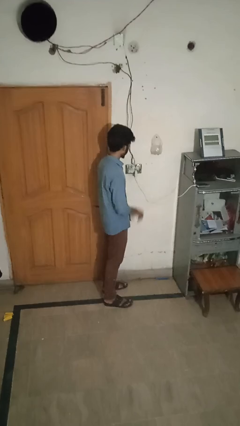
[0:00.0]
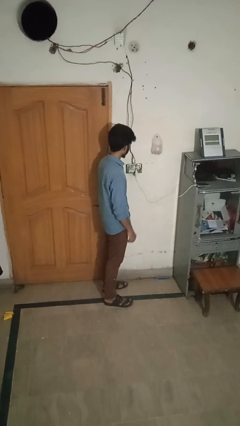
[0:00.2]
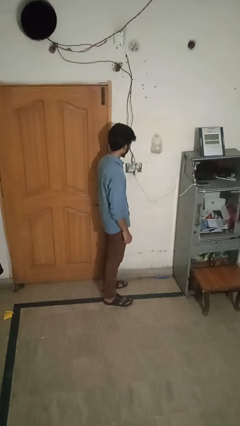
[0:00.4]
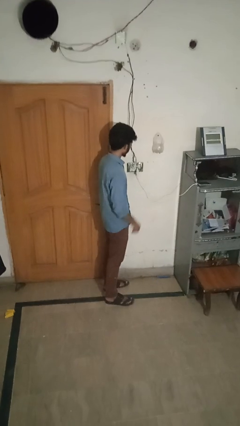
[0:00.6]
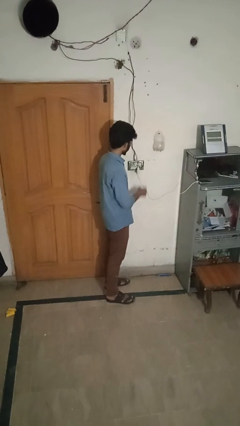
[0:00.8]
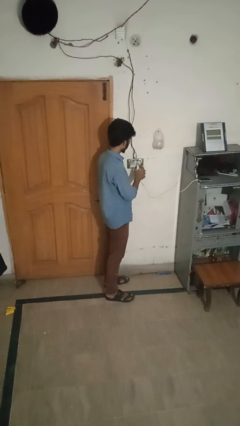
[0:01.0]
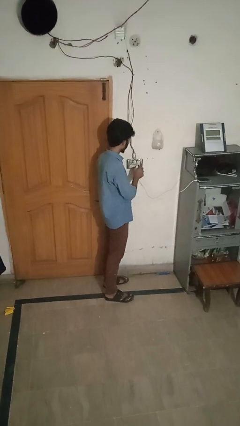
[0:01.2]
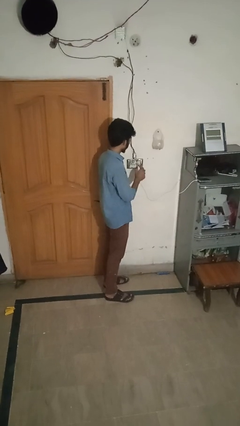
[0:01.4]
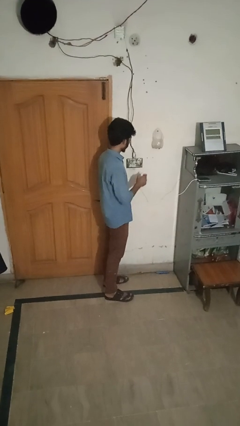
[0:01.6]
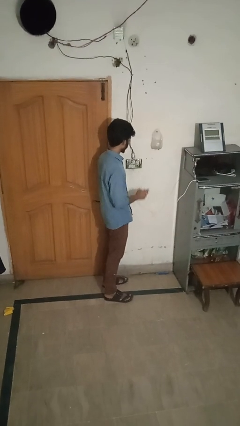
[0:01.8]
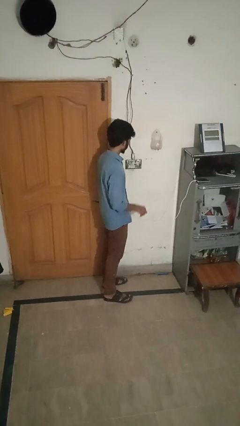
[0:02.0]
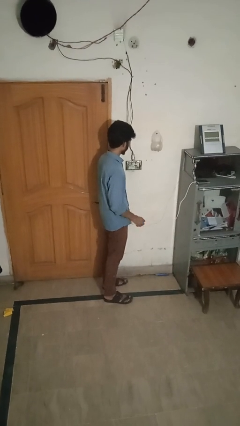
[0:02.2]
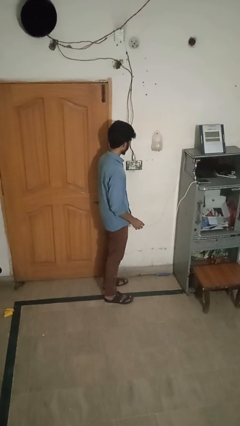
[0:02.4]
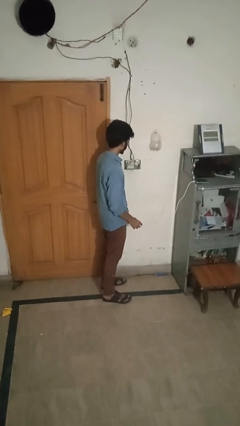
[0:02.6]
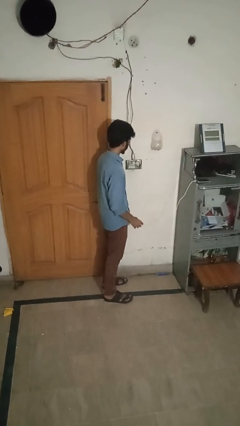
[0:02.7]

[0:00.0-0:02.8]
person unplugs from electrical socket

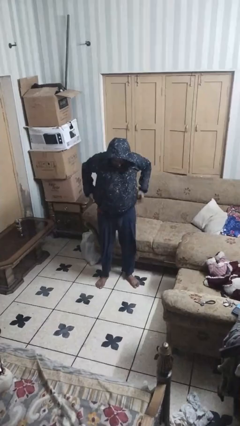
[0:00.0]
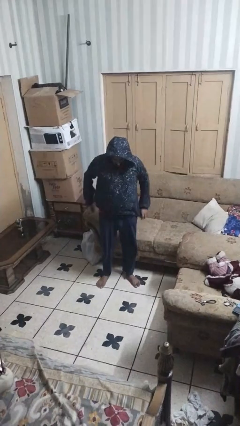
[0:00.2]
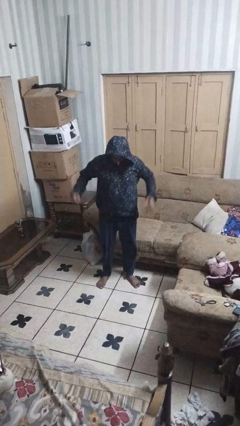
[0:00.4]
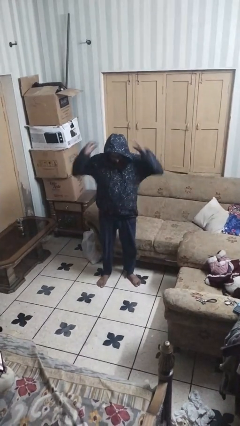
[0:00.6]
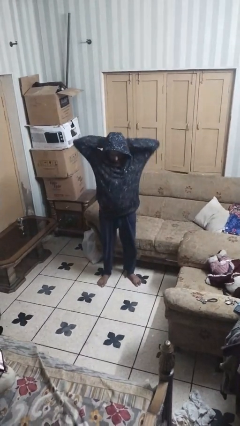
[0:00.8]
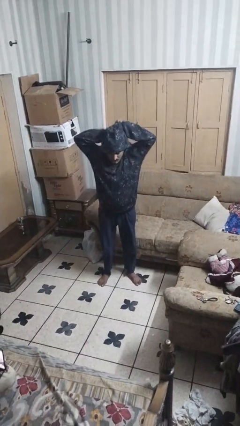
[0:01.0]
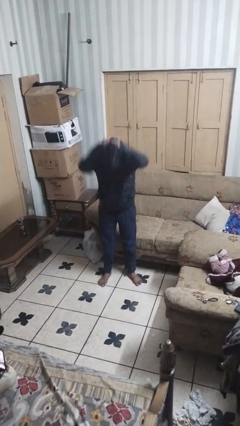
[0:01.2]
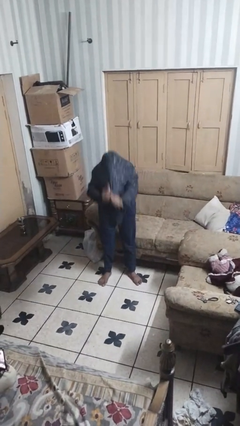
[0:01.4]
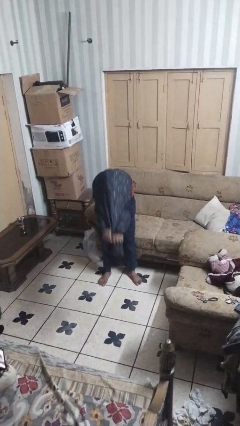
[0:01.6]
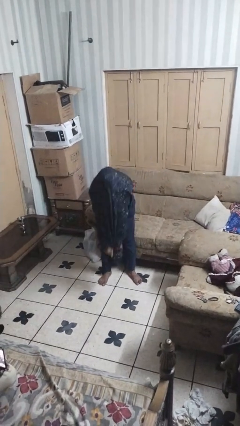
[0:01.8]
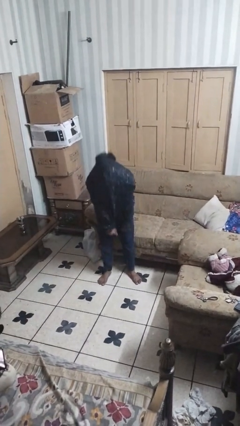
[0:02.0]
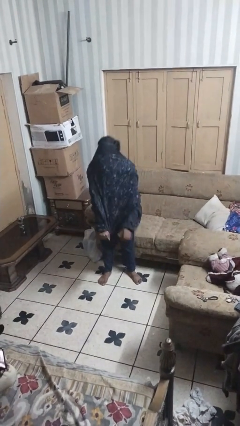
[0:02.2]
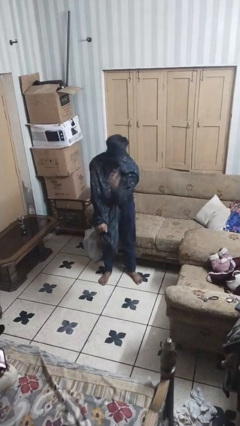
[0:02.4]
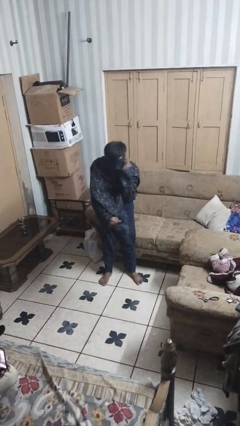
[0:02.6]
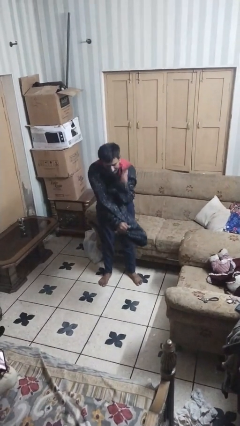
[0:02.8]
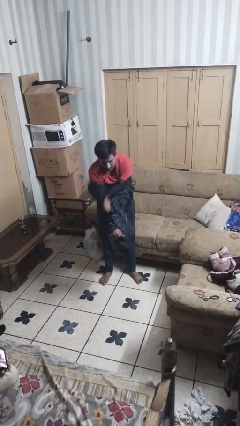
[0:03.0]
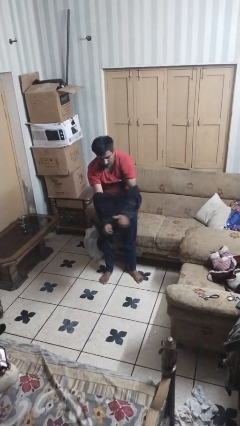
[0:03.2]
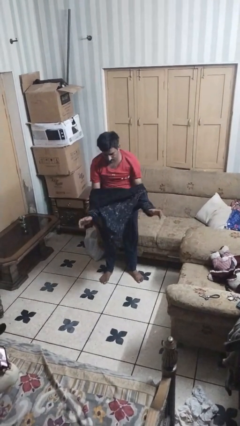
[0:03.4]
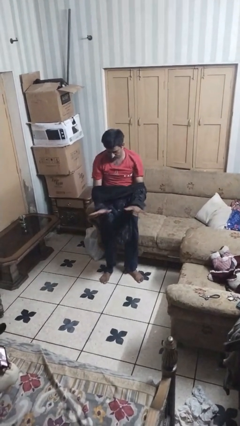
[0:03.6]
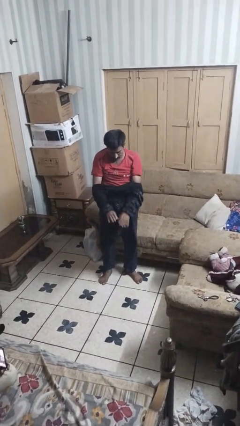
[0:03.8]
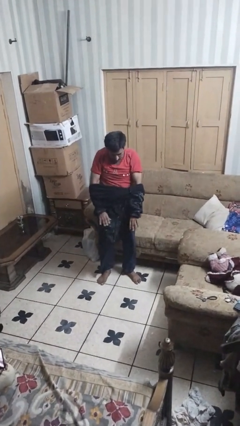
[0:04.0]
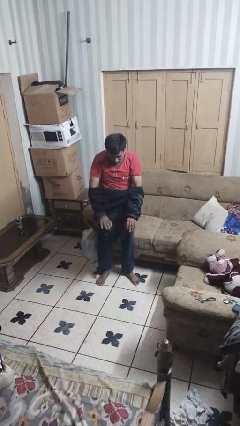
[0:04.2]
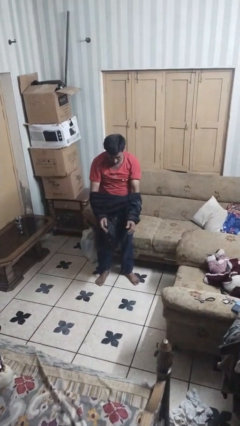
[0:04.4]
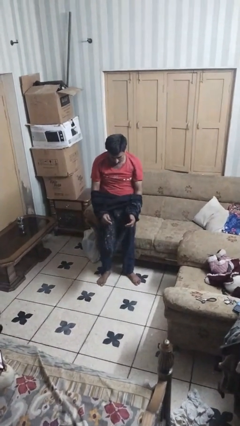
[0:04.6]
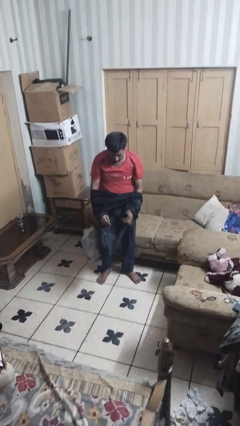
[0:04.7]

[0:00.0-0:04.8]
person takes off hoodie

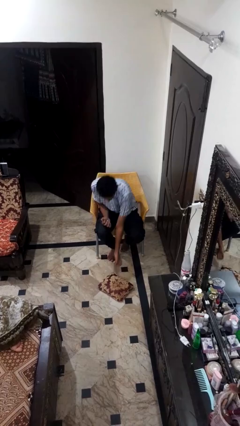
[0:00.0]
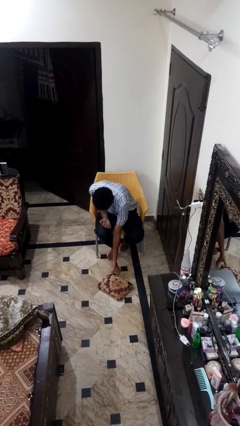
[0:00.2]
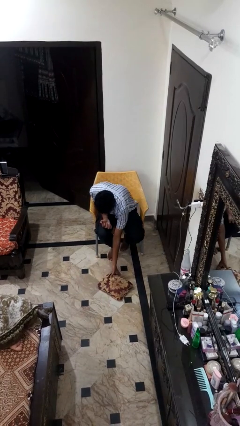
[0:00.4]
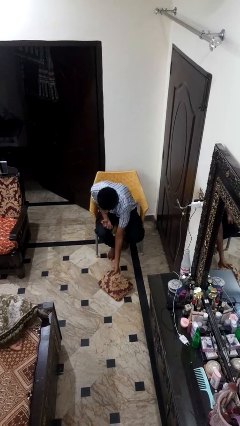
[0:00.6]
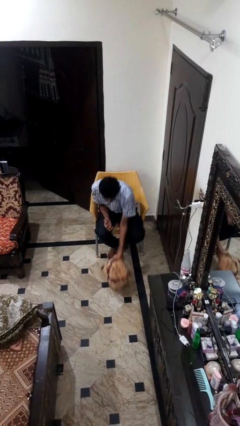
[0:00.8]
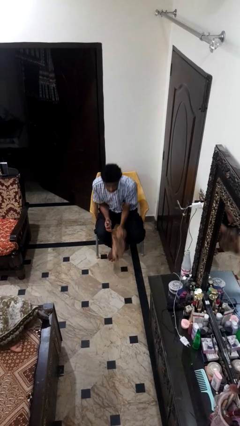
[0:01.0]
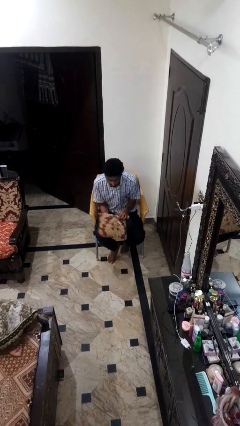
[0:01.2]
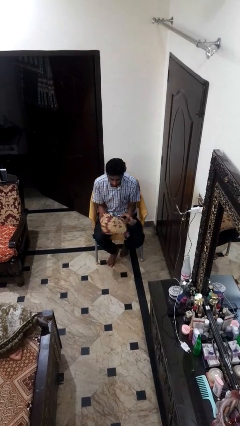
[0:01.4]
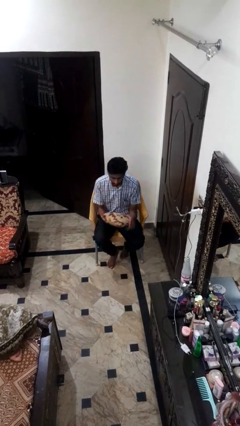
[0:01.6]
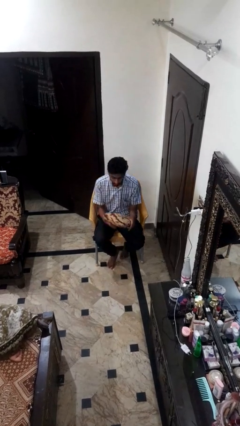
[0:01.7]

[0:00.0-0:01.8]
person picks up object from floor

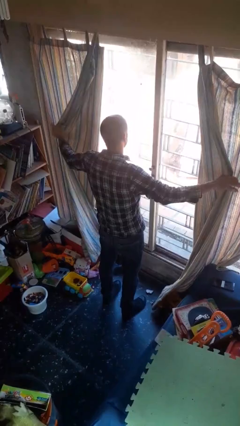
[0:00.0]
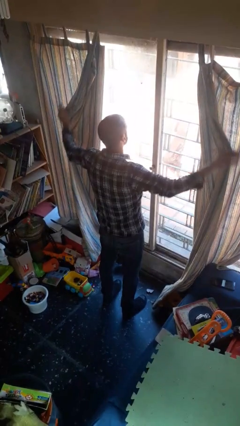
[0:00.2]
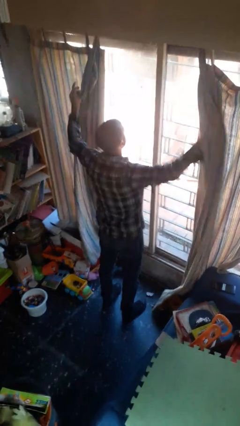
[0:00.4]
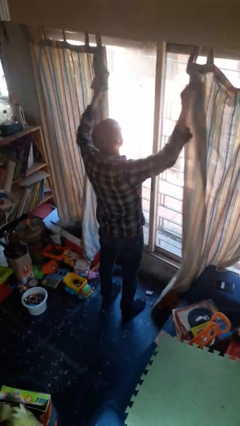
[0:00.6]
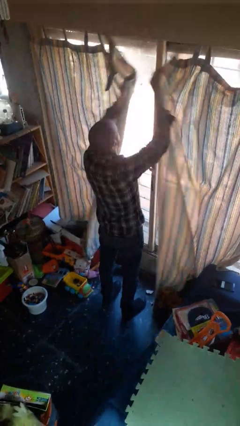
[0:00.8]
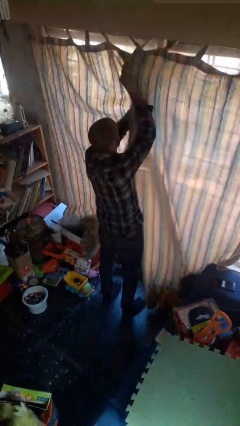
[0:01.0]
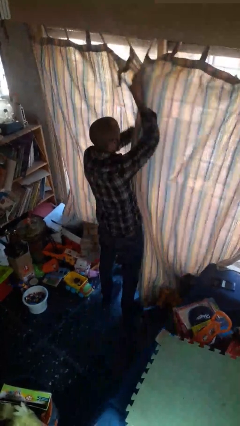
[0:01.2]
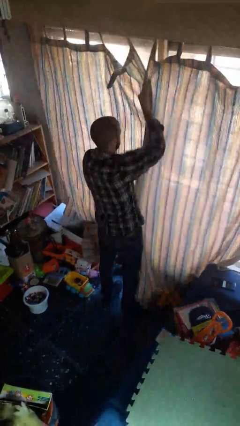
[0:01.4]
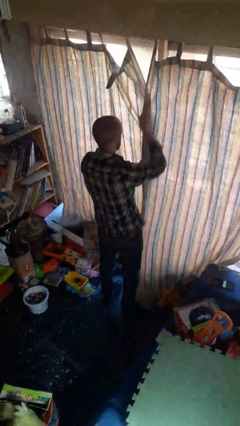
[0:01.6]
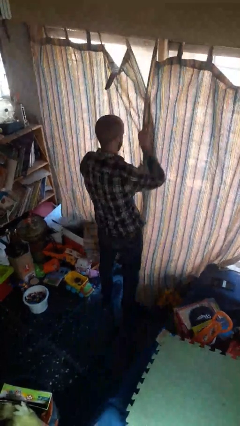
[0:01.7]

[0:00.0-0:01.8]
person closes curtains

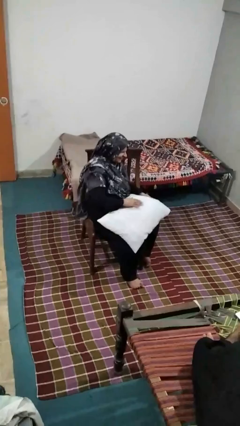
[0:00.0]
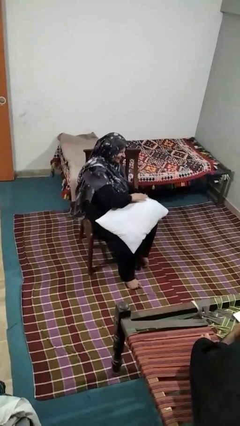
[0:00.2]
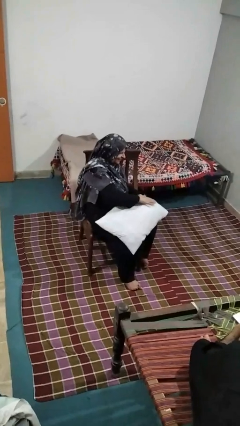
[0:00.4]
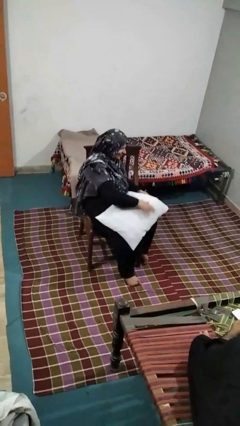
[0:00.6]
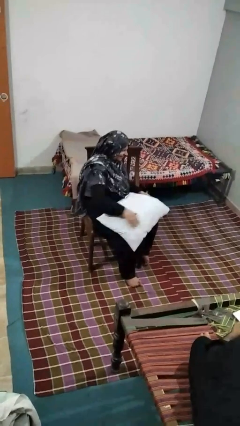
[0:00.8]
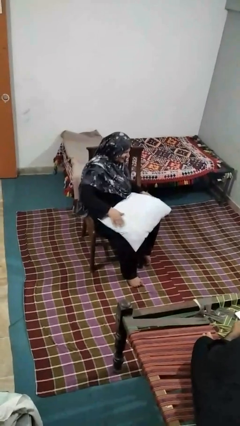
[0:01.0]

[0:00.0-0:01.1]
person waves hand over object

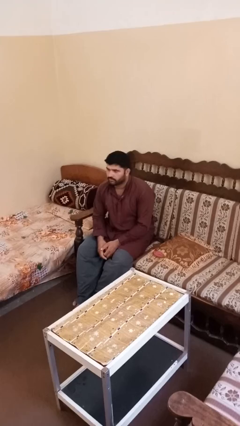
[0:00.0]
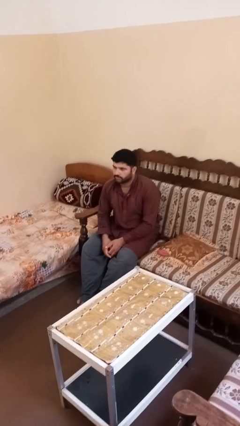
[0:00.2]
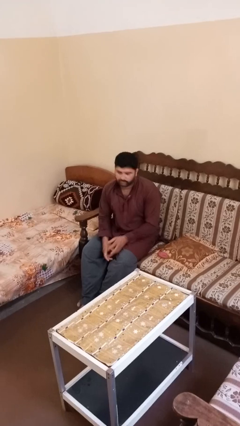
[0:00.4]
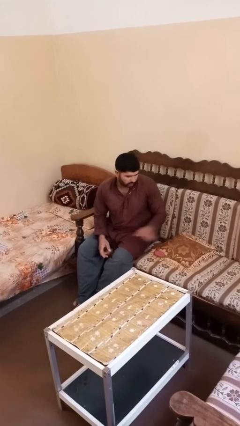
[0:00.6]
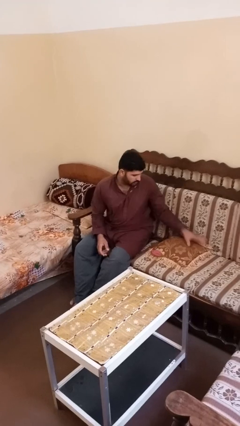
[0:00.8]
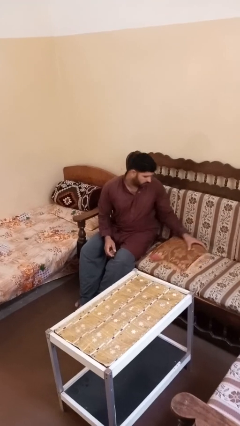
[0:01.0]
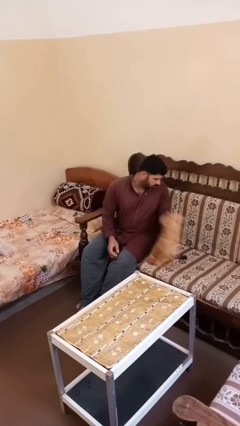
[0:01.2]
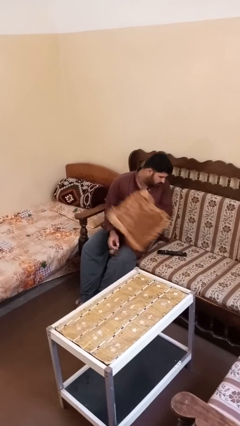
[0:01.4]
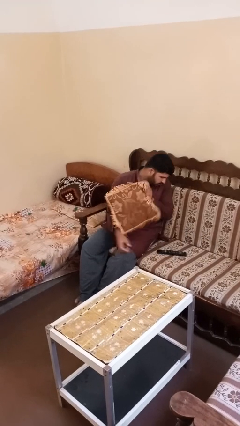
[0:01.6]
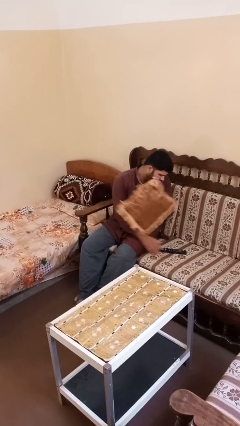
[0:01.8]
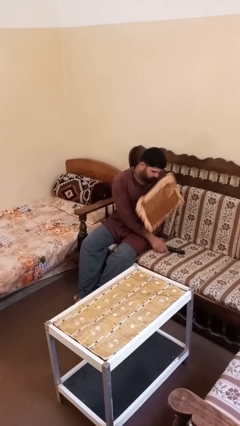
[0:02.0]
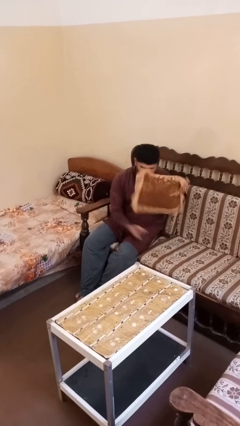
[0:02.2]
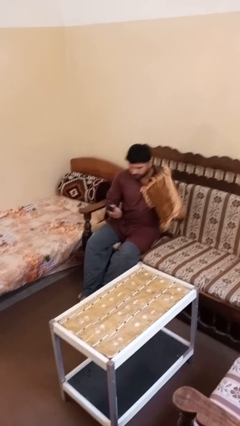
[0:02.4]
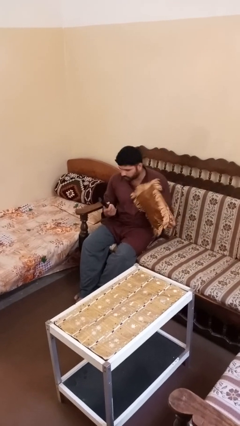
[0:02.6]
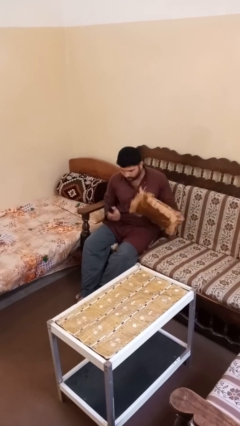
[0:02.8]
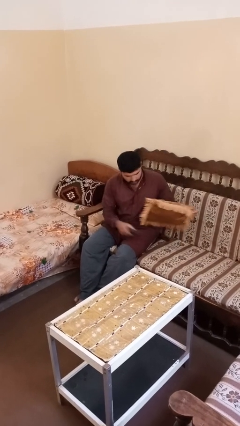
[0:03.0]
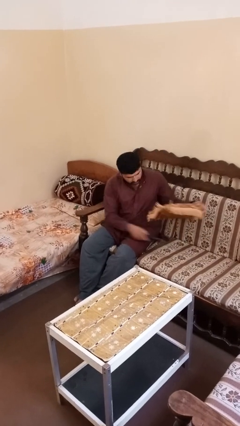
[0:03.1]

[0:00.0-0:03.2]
person searches in couch

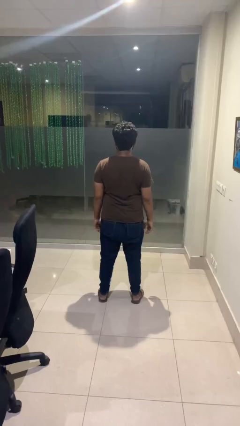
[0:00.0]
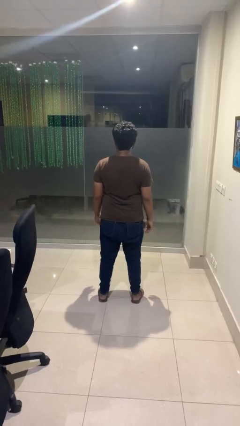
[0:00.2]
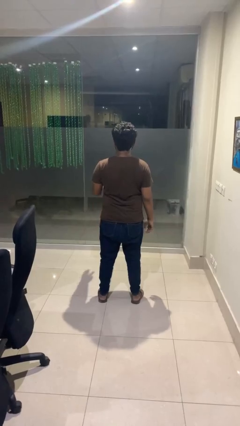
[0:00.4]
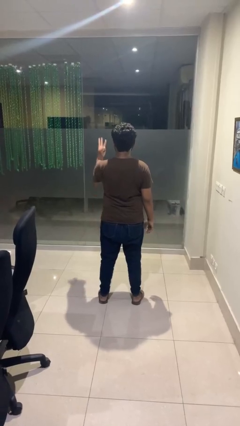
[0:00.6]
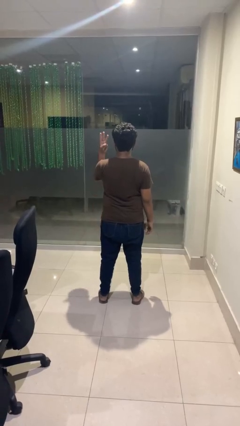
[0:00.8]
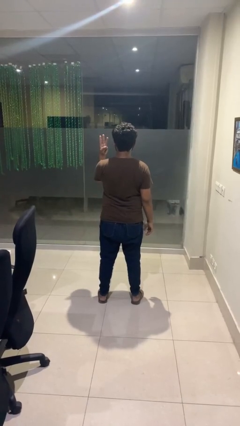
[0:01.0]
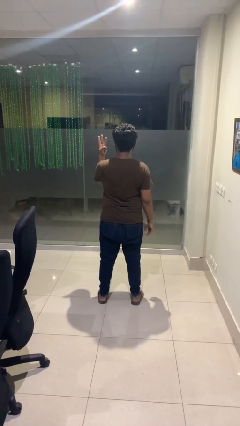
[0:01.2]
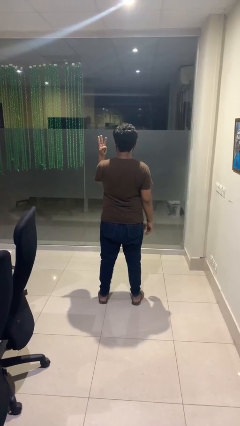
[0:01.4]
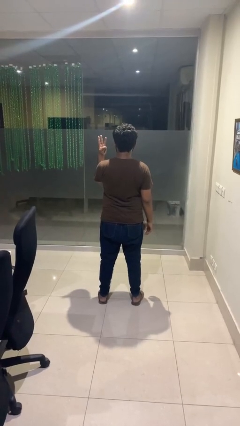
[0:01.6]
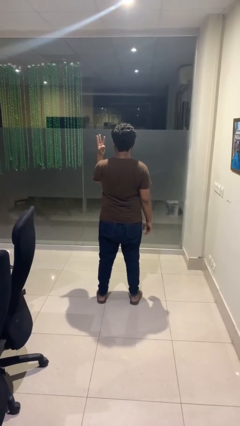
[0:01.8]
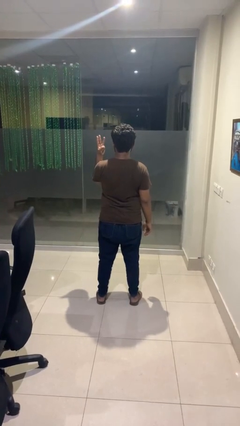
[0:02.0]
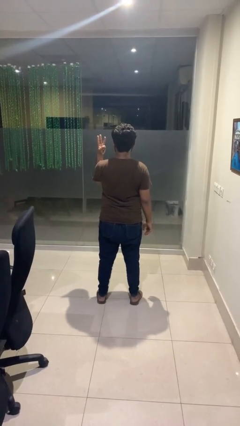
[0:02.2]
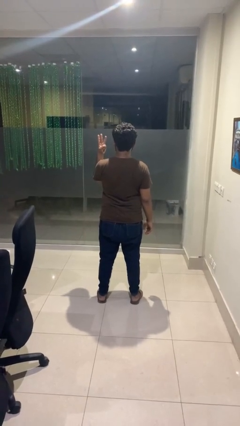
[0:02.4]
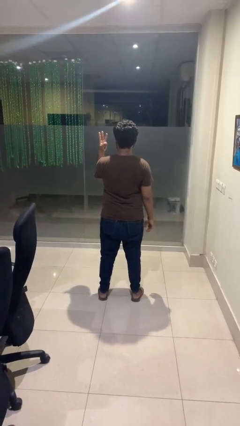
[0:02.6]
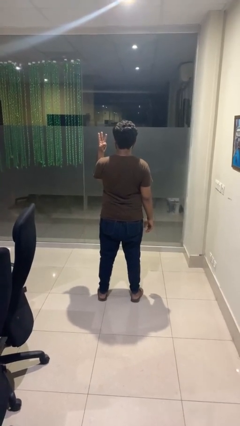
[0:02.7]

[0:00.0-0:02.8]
person gestures number three
